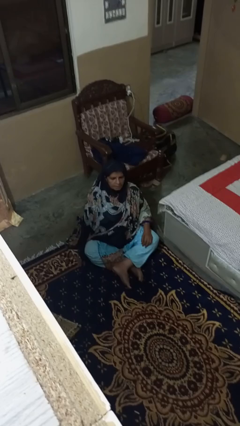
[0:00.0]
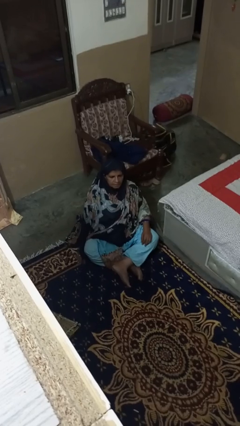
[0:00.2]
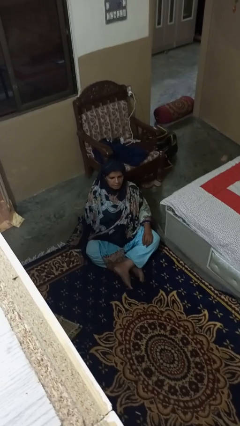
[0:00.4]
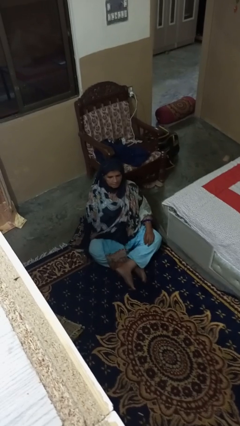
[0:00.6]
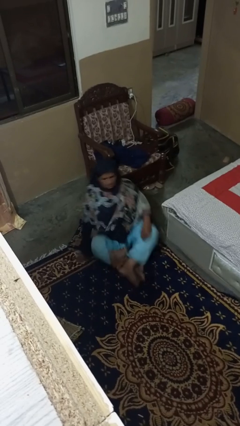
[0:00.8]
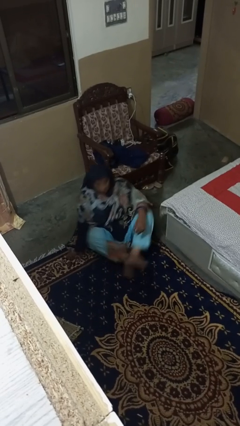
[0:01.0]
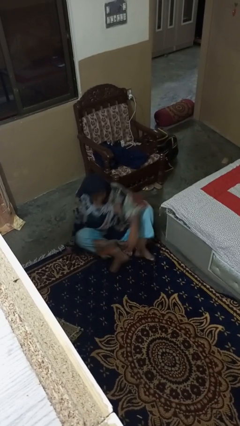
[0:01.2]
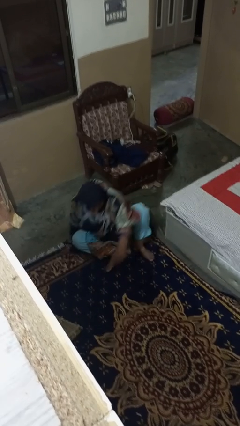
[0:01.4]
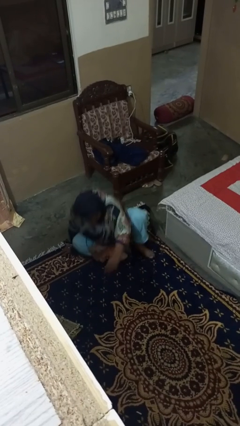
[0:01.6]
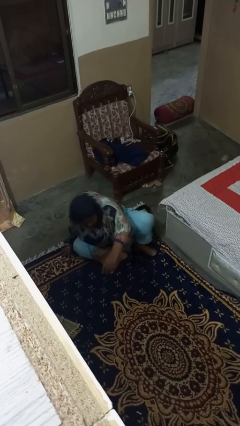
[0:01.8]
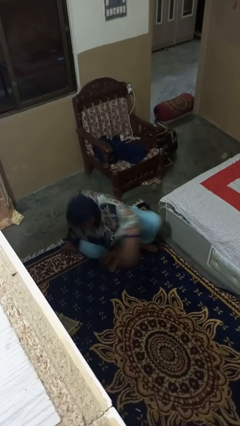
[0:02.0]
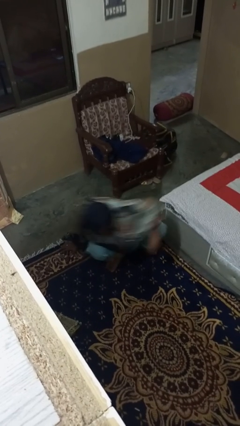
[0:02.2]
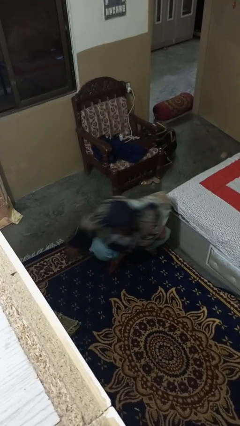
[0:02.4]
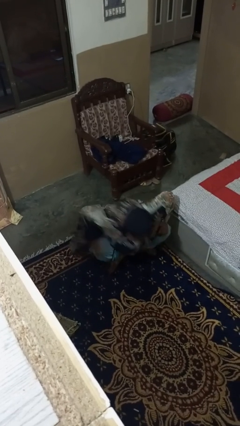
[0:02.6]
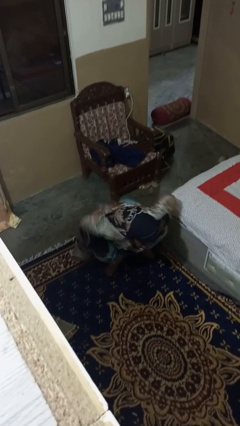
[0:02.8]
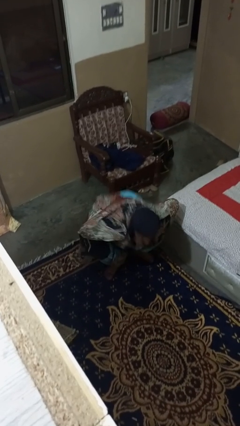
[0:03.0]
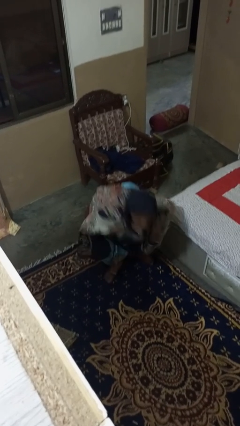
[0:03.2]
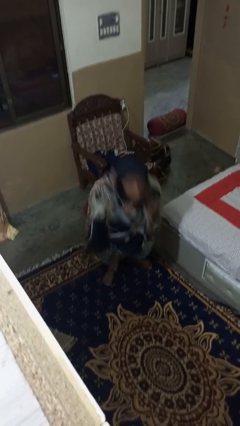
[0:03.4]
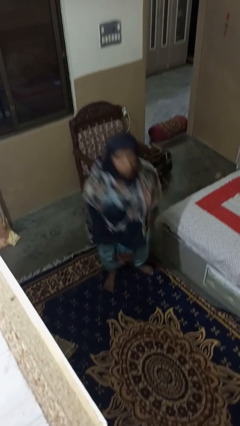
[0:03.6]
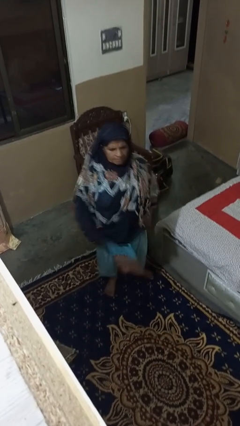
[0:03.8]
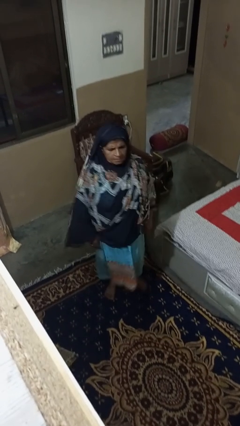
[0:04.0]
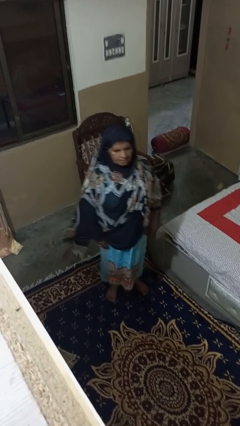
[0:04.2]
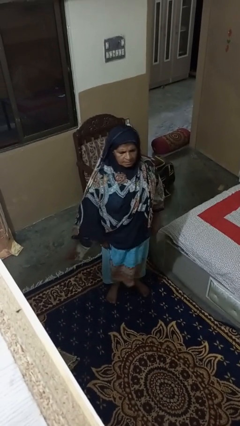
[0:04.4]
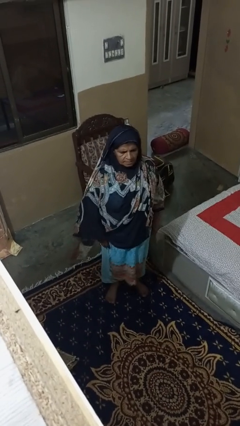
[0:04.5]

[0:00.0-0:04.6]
person stands up from floor

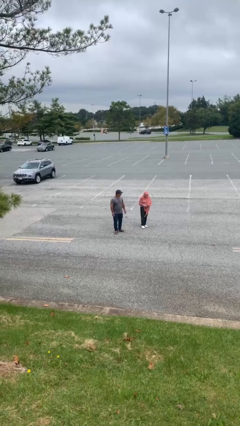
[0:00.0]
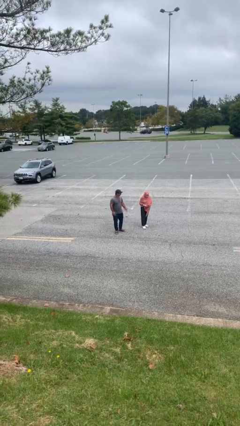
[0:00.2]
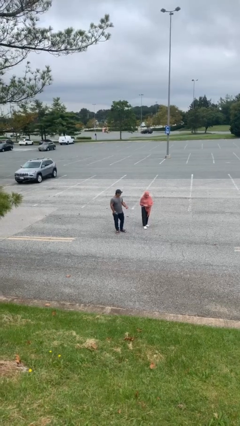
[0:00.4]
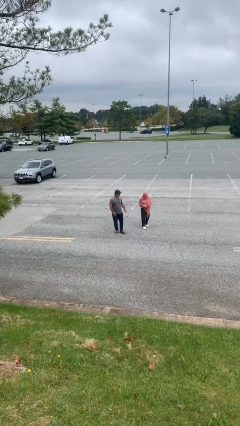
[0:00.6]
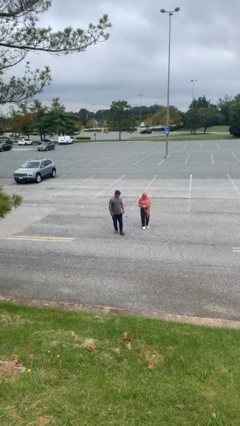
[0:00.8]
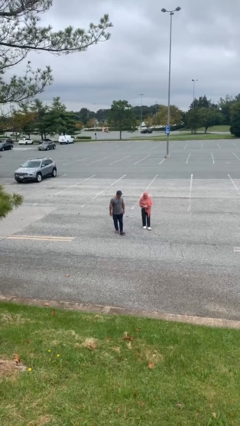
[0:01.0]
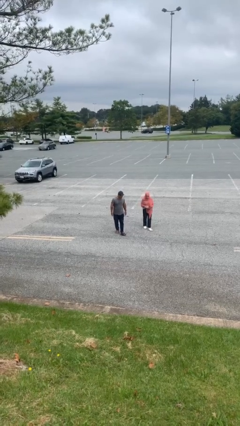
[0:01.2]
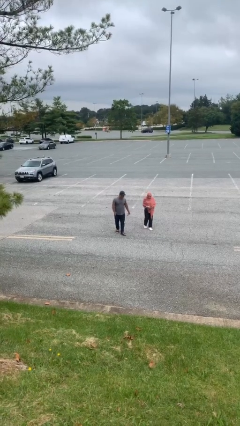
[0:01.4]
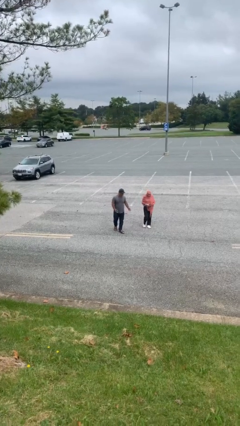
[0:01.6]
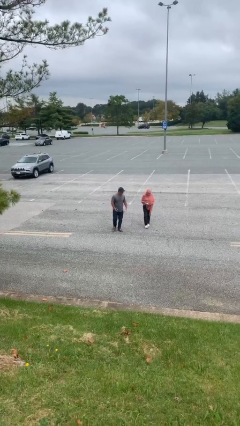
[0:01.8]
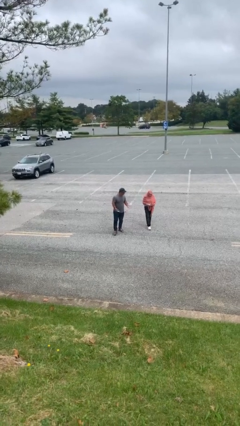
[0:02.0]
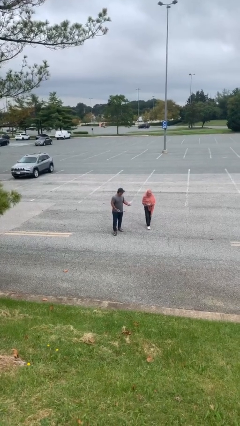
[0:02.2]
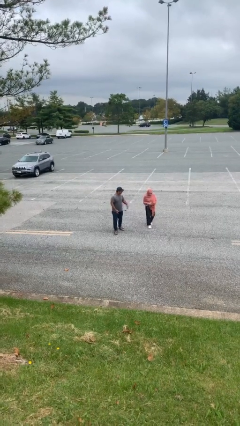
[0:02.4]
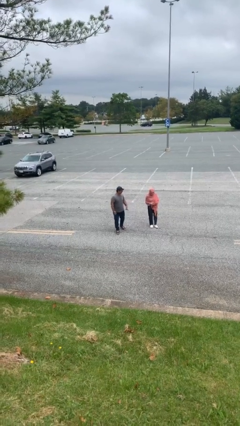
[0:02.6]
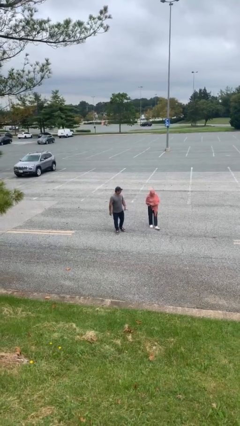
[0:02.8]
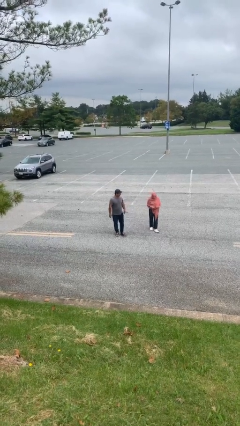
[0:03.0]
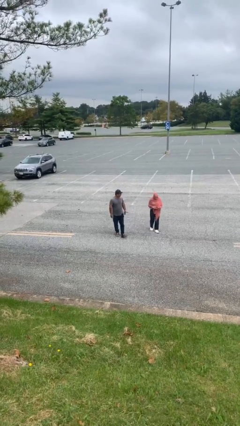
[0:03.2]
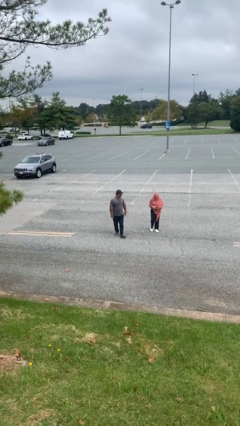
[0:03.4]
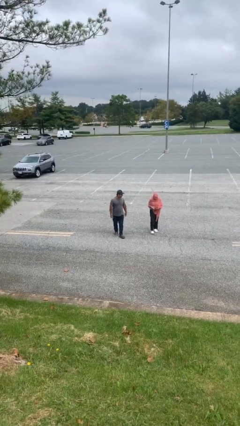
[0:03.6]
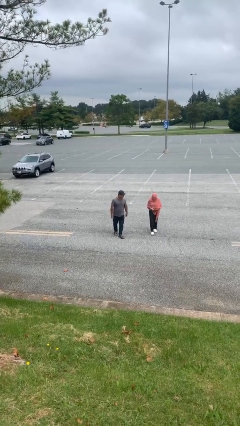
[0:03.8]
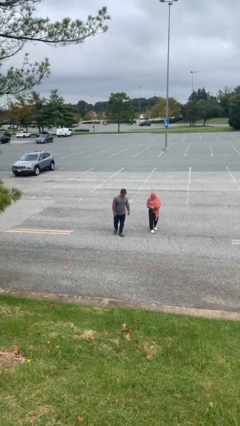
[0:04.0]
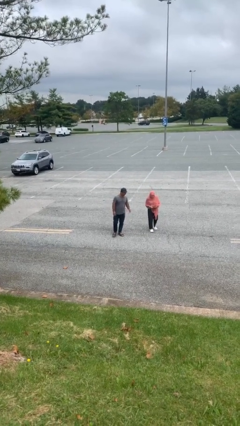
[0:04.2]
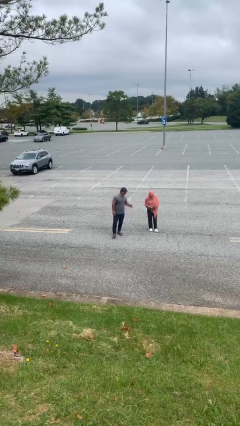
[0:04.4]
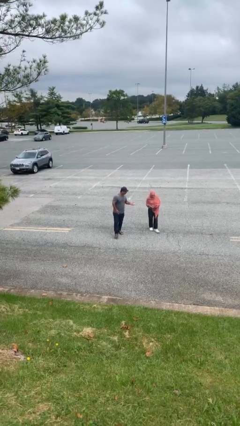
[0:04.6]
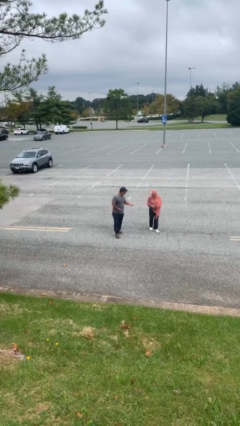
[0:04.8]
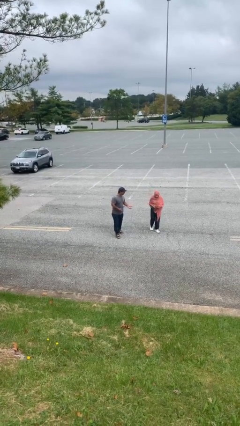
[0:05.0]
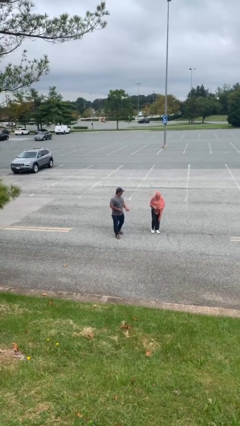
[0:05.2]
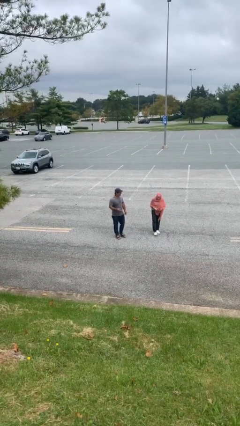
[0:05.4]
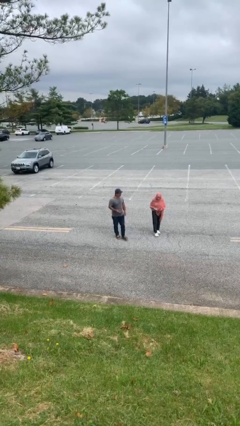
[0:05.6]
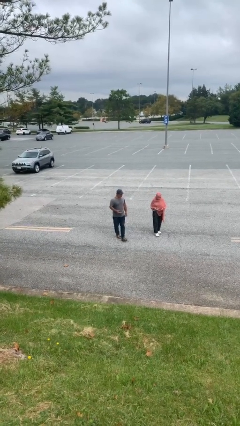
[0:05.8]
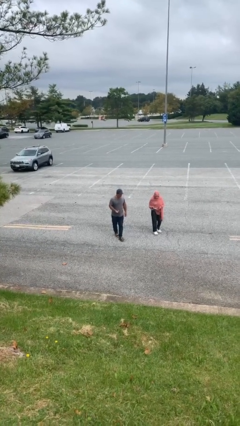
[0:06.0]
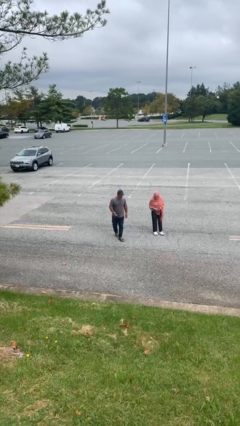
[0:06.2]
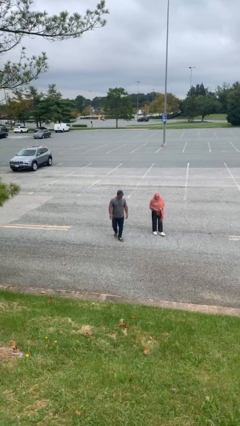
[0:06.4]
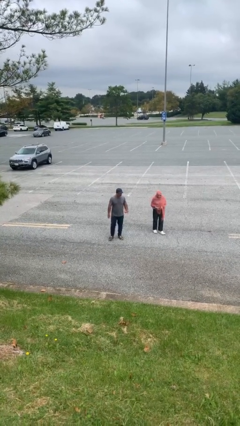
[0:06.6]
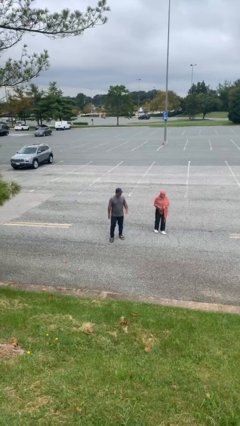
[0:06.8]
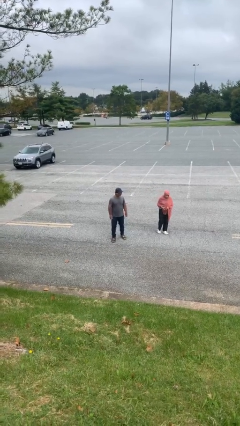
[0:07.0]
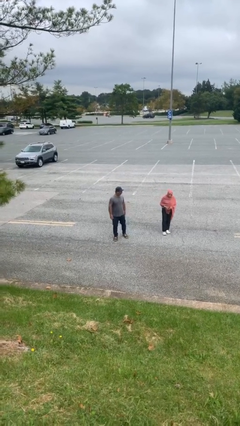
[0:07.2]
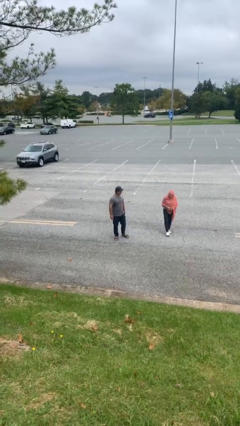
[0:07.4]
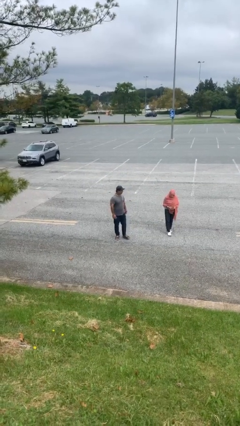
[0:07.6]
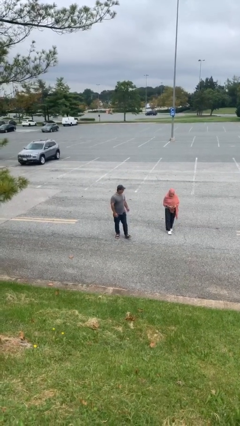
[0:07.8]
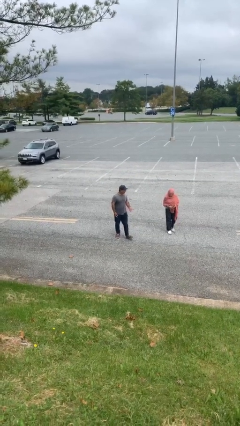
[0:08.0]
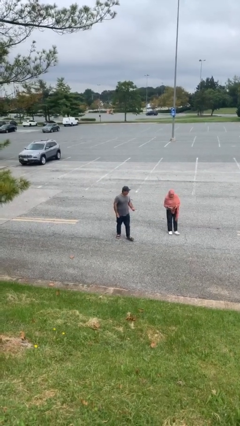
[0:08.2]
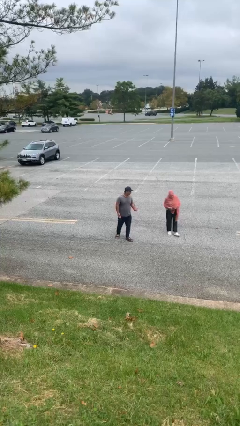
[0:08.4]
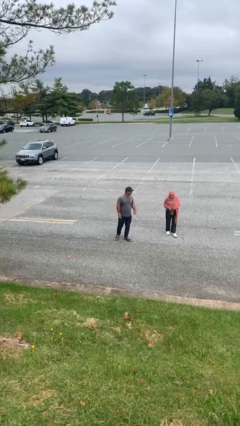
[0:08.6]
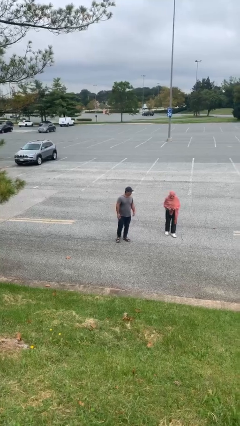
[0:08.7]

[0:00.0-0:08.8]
person talks to person

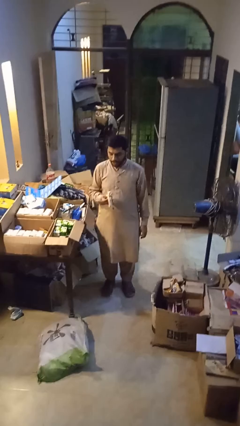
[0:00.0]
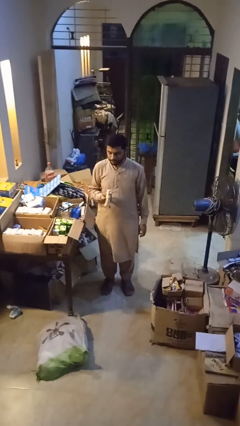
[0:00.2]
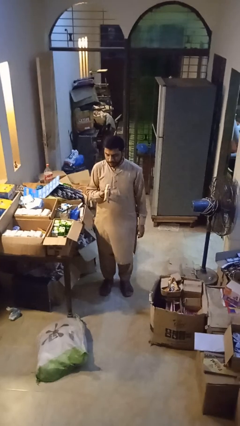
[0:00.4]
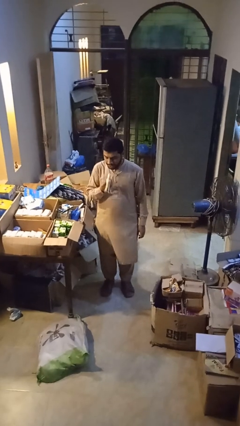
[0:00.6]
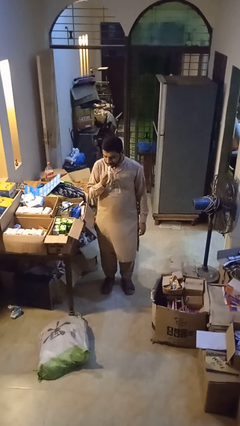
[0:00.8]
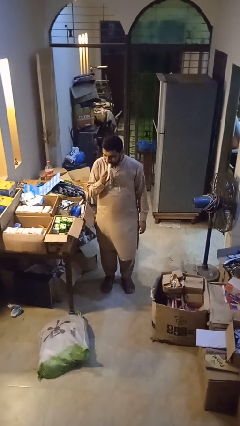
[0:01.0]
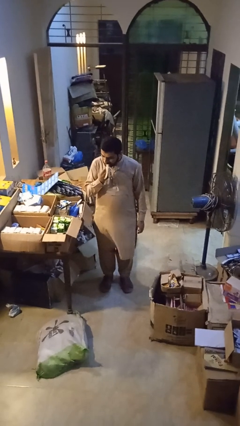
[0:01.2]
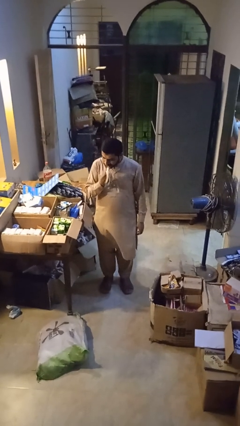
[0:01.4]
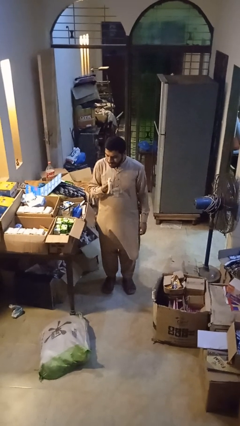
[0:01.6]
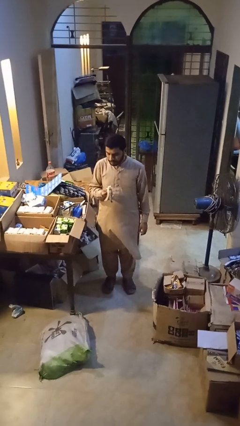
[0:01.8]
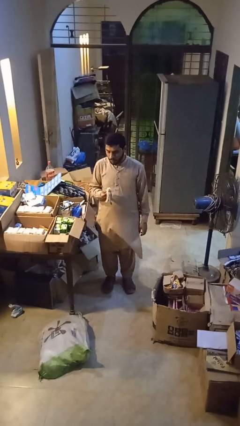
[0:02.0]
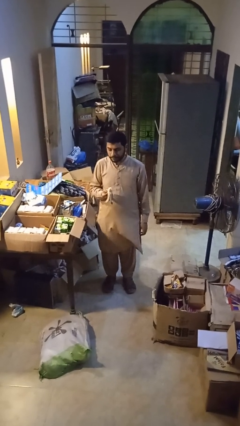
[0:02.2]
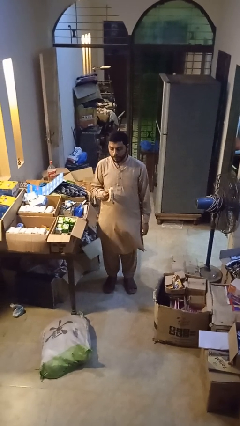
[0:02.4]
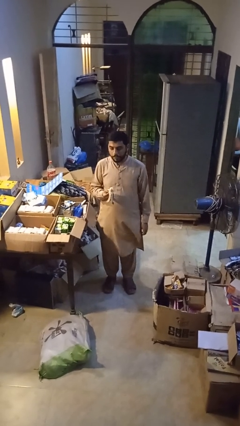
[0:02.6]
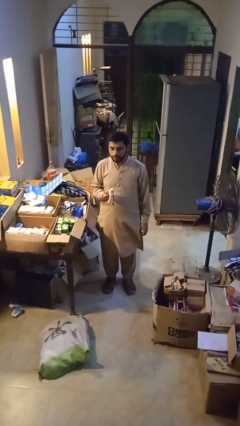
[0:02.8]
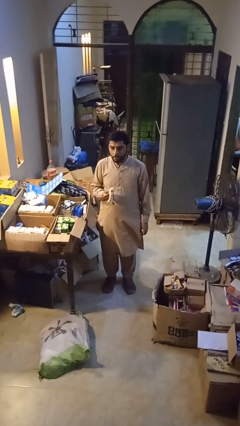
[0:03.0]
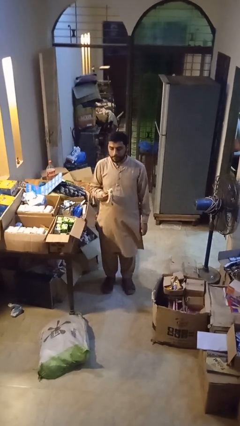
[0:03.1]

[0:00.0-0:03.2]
person eats banana

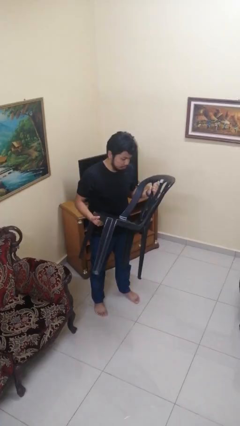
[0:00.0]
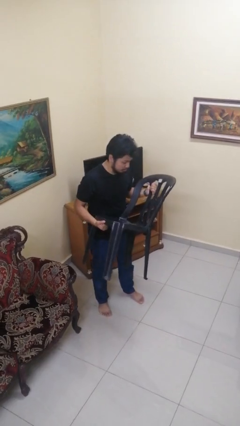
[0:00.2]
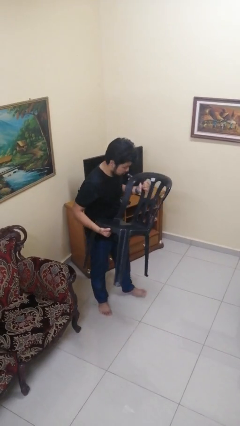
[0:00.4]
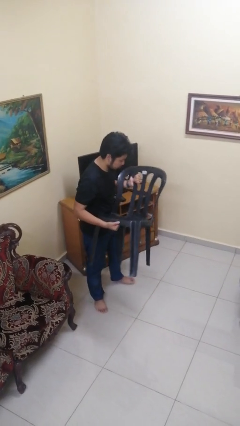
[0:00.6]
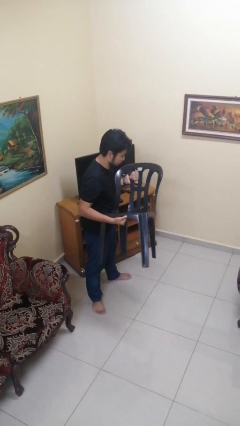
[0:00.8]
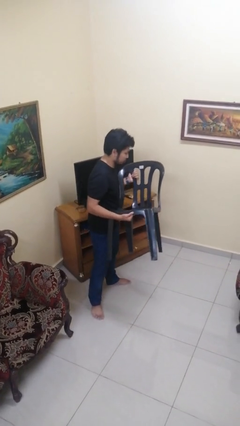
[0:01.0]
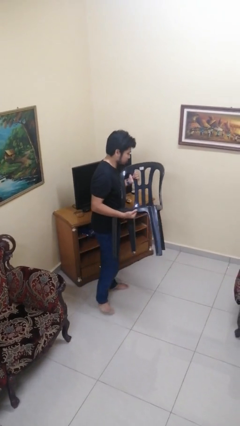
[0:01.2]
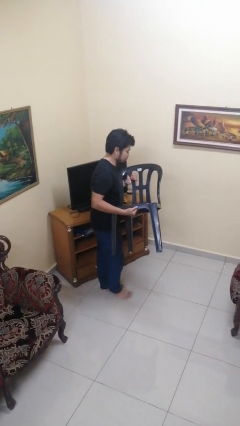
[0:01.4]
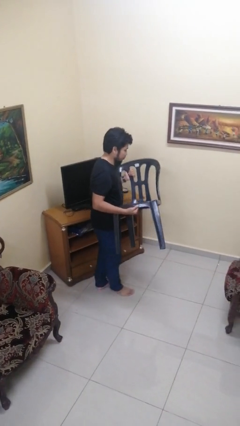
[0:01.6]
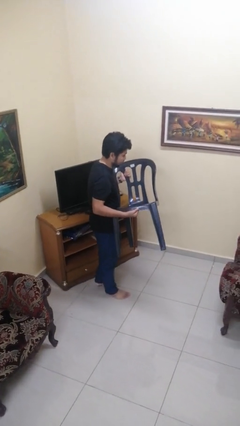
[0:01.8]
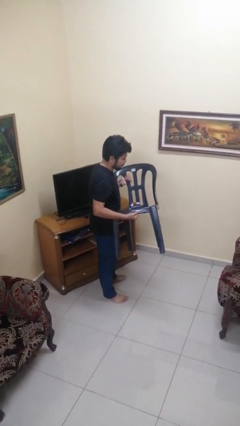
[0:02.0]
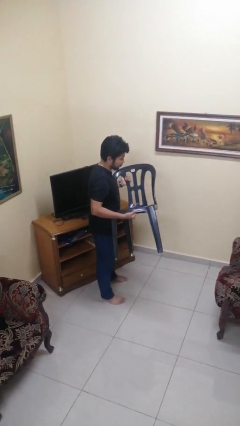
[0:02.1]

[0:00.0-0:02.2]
person carries furniture
